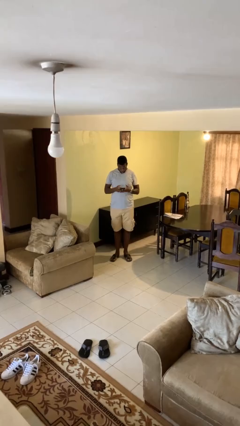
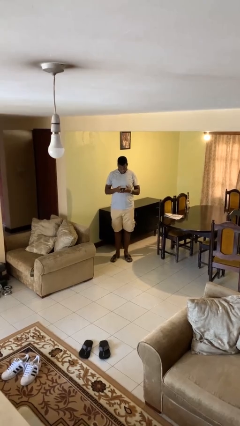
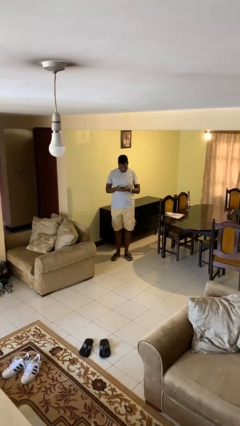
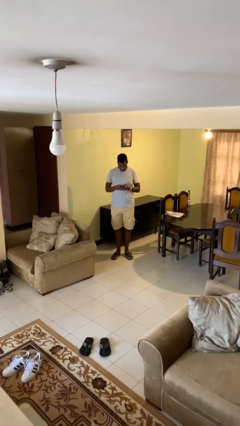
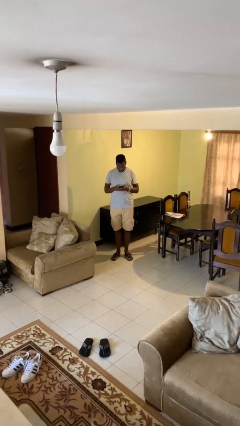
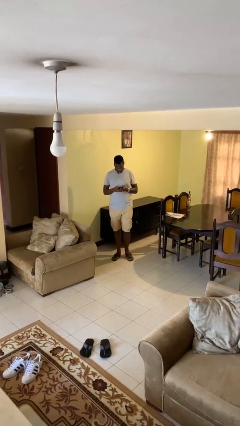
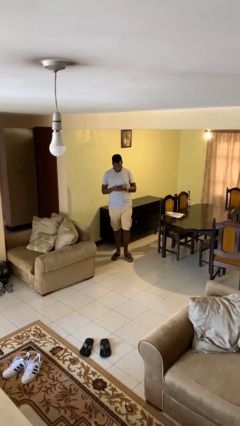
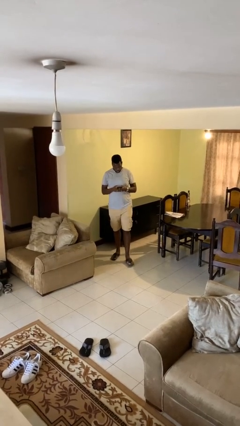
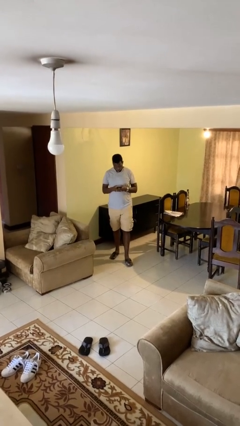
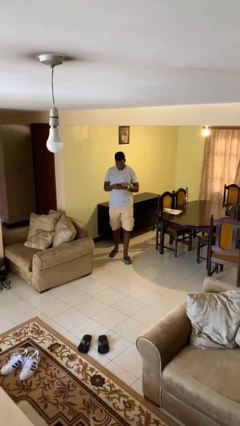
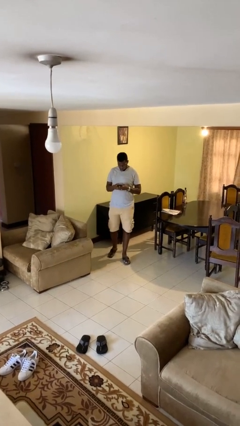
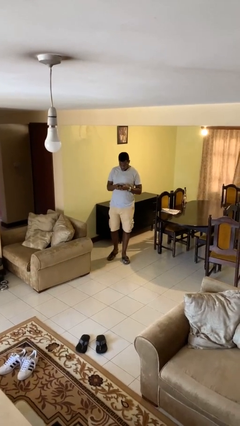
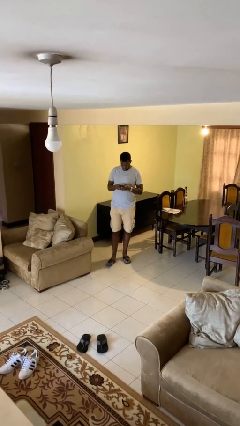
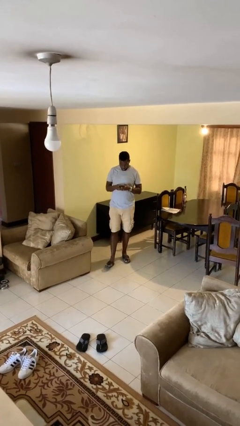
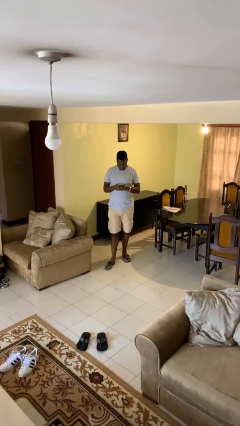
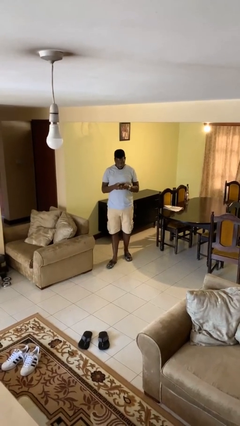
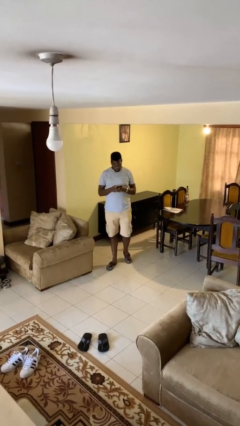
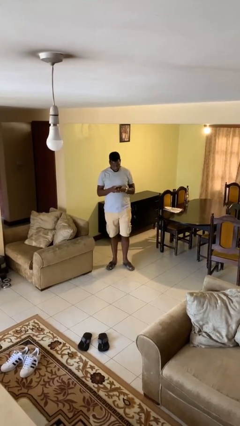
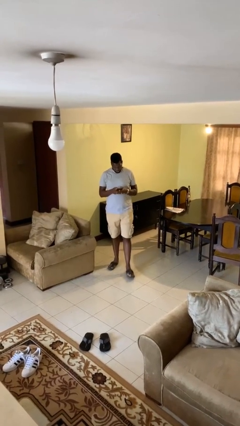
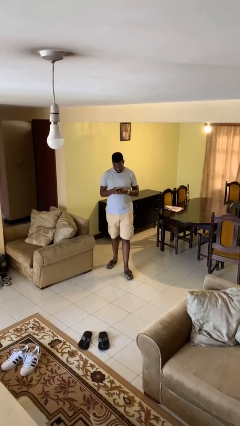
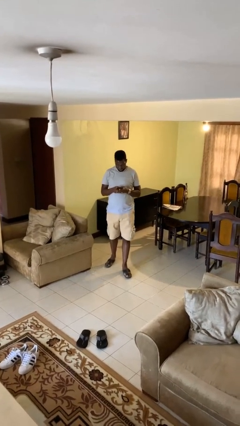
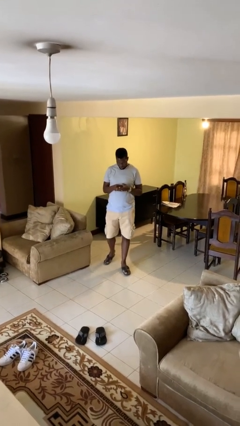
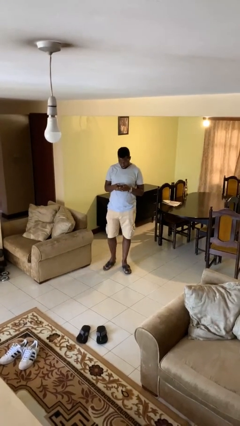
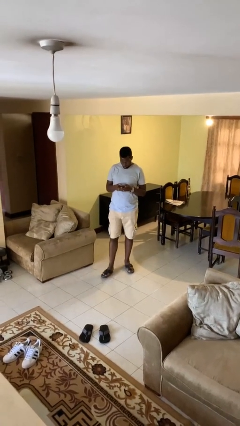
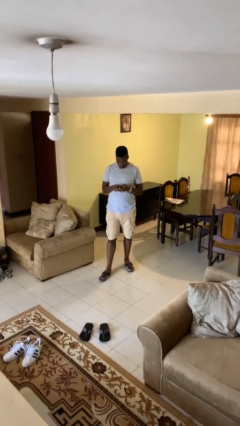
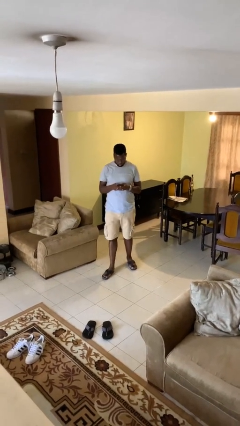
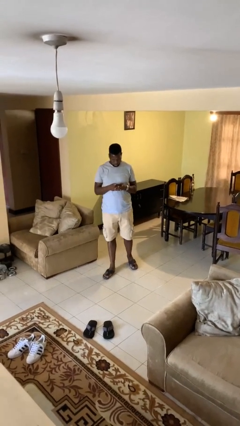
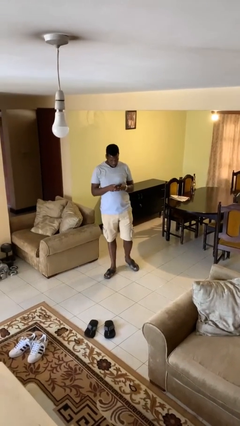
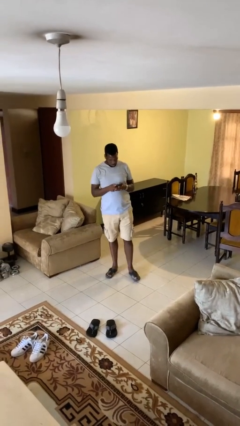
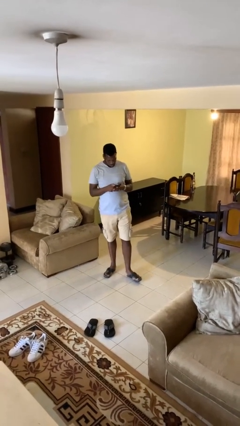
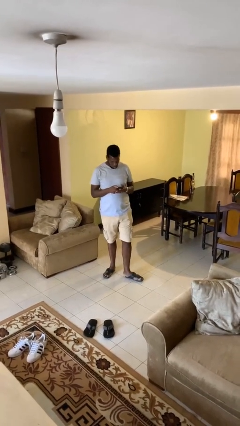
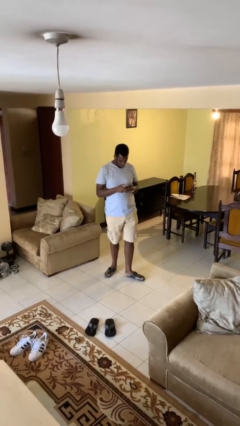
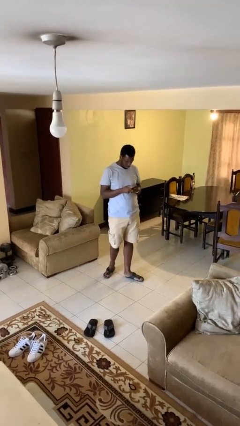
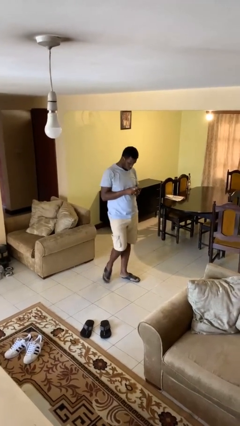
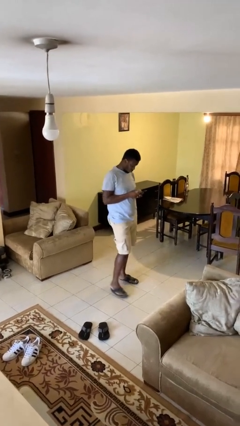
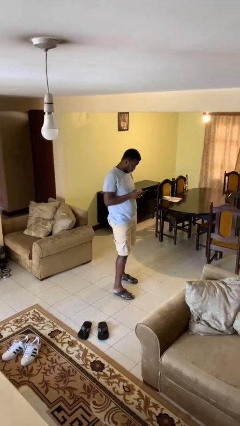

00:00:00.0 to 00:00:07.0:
person texts on phone

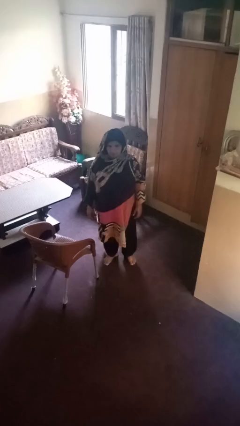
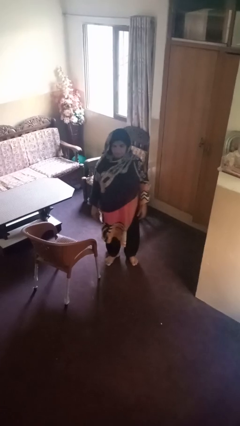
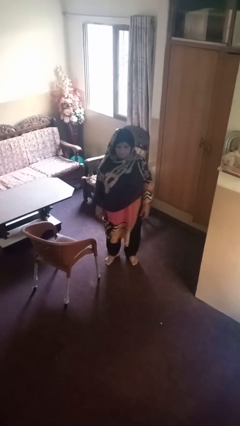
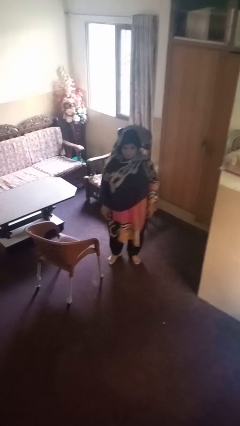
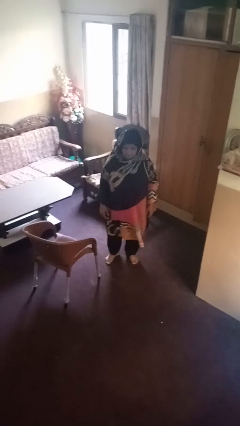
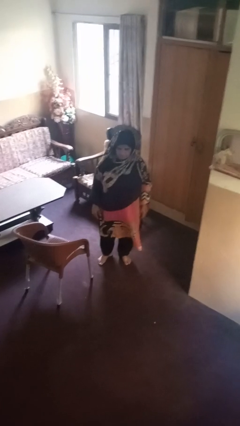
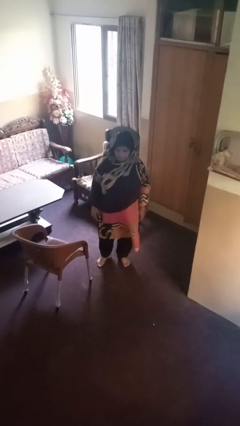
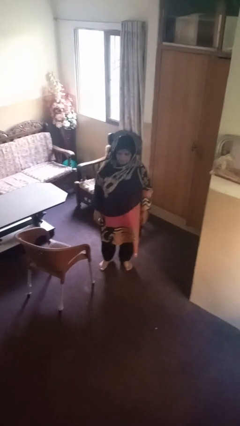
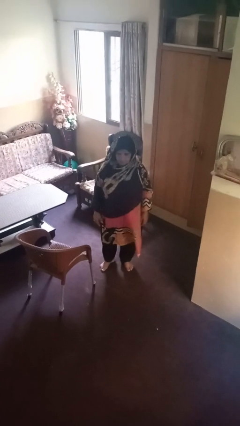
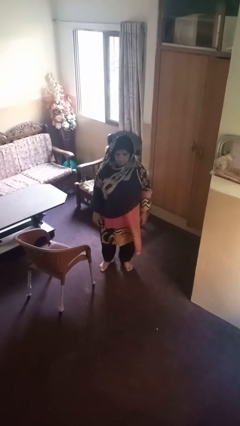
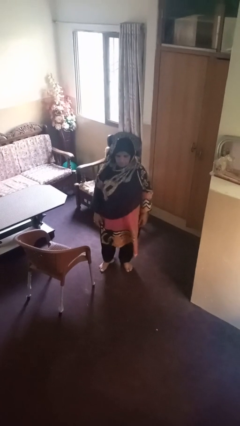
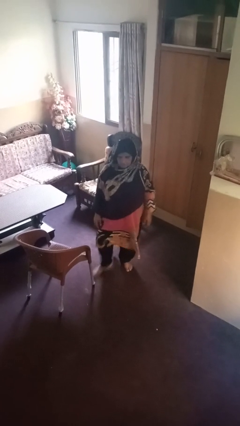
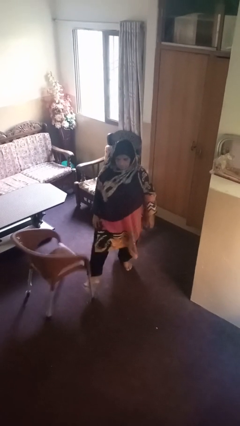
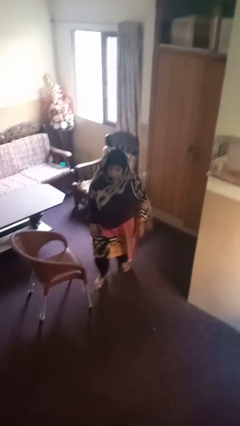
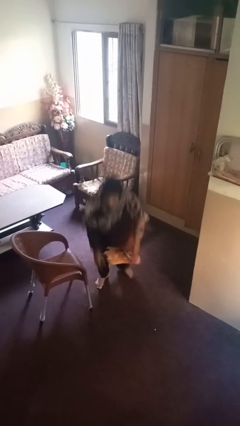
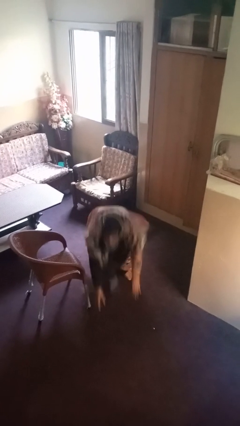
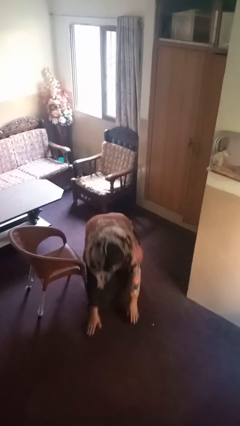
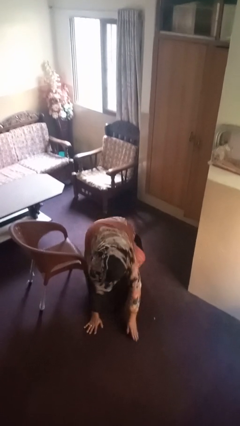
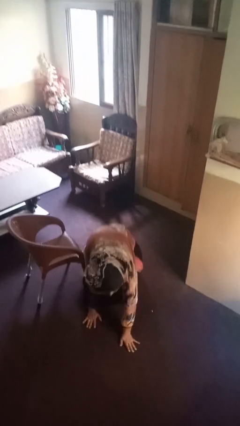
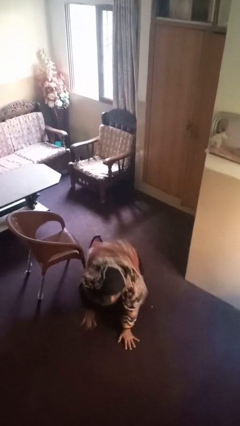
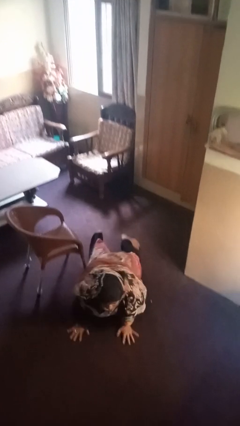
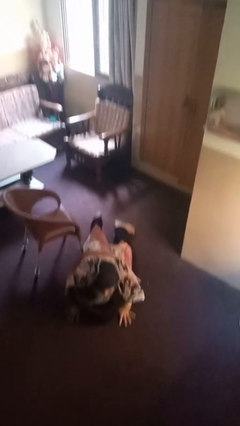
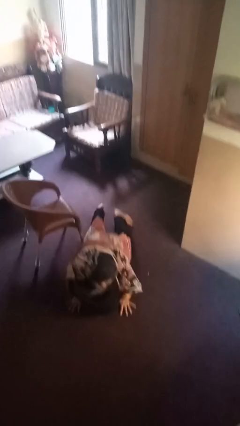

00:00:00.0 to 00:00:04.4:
person trips on object on floor

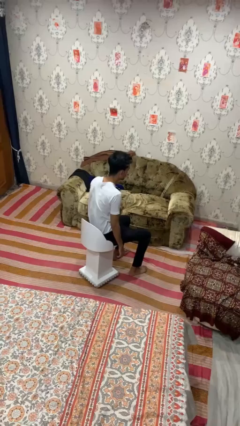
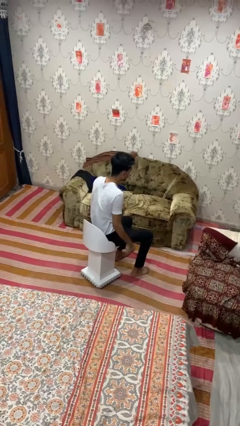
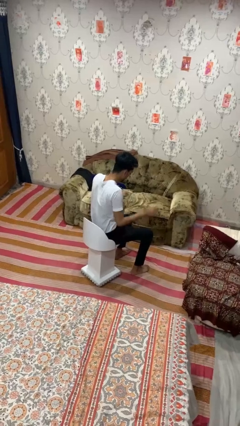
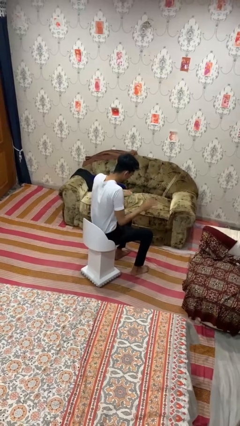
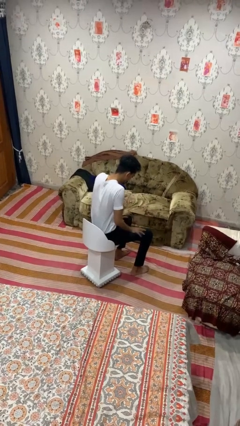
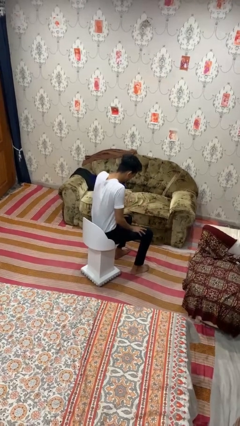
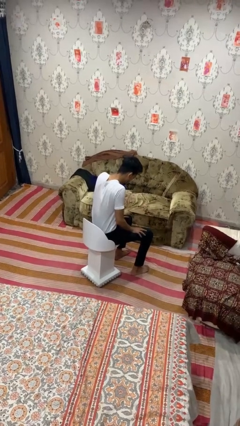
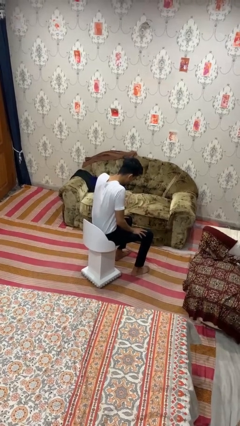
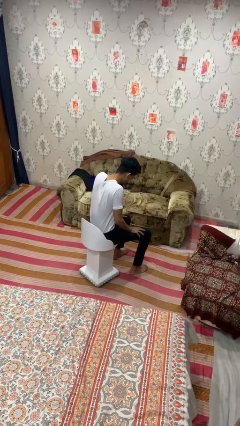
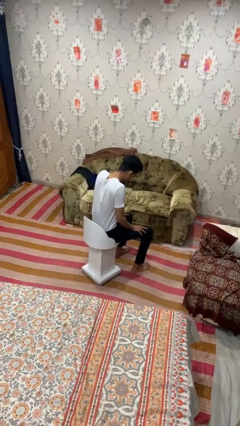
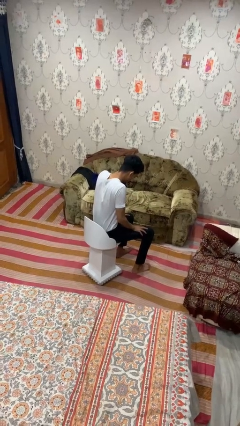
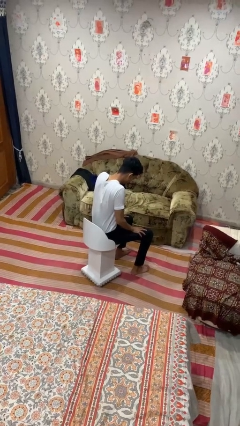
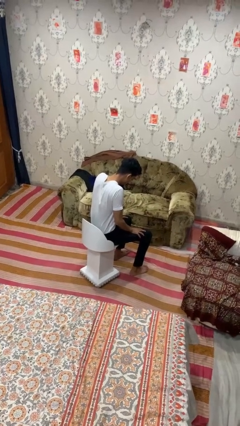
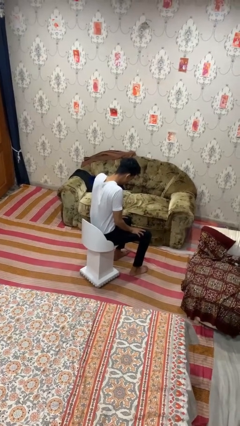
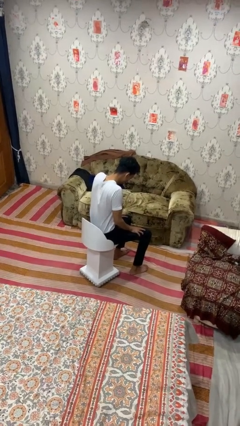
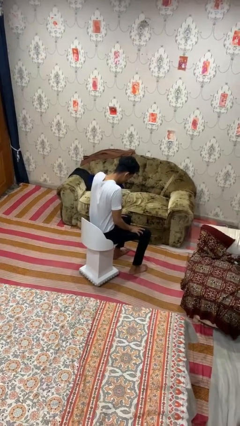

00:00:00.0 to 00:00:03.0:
person slaps hands on thighs

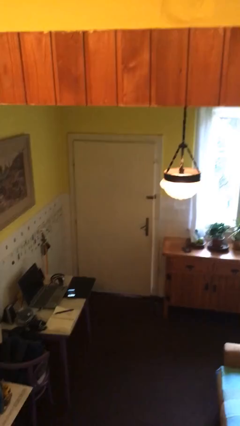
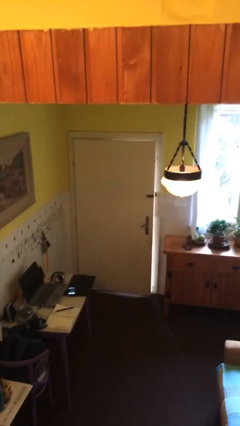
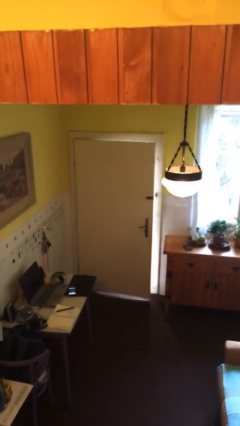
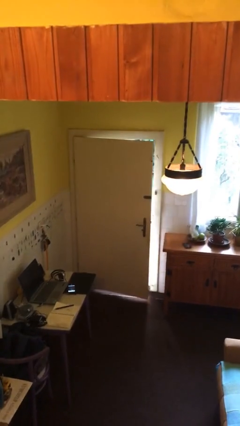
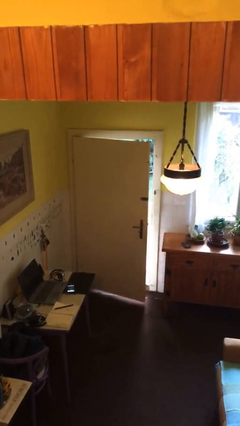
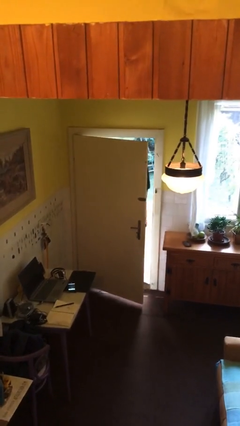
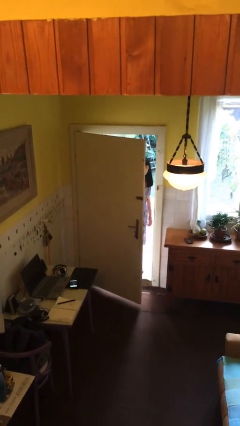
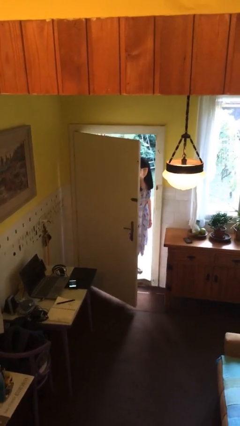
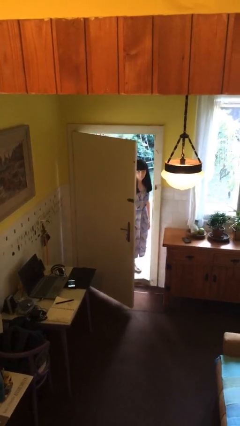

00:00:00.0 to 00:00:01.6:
person opens facility door

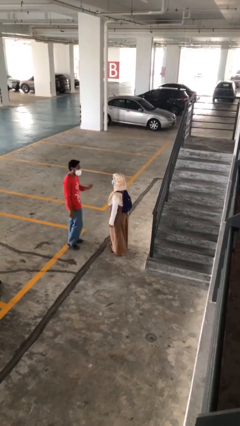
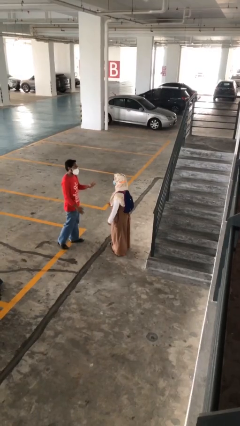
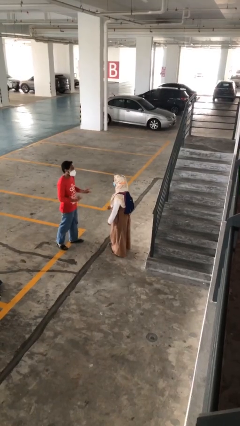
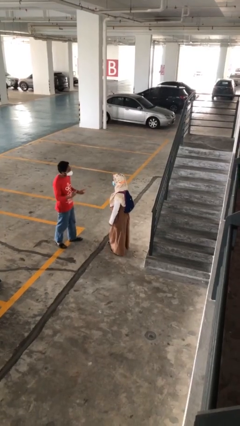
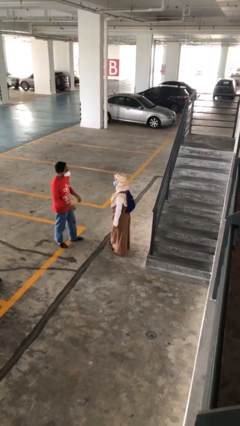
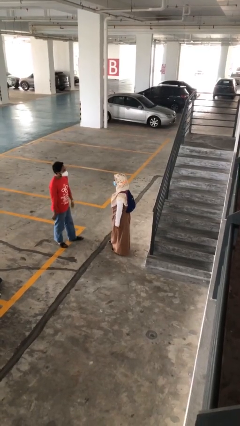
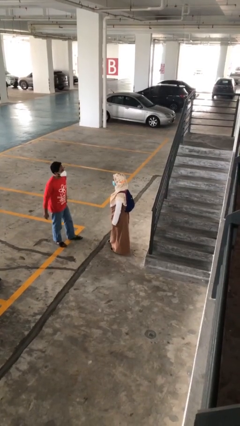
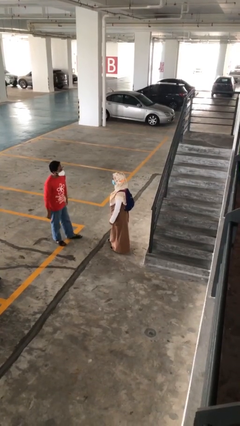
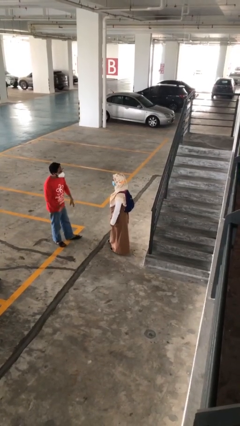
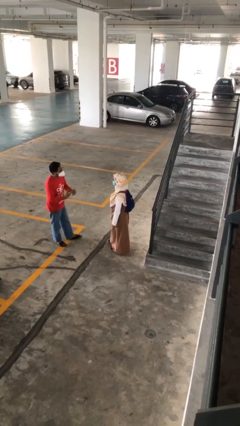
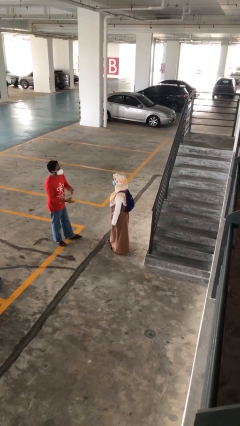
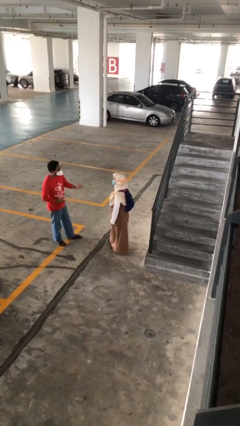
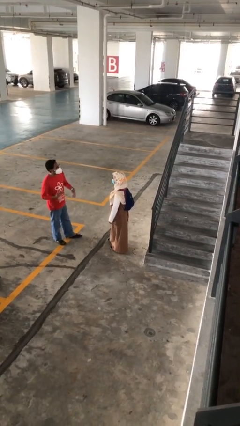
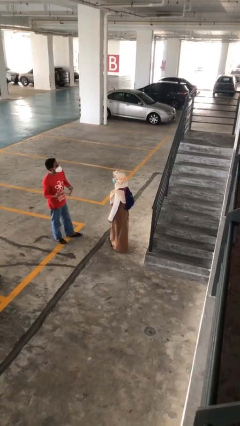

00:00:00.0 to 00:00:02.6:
person talks to person
